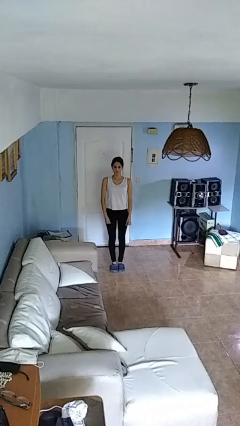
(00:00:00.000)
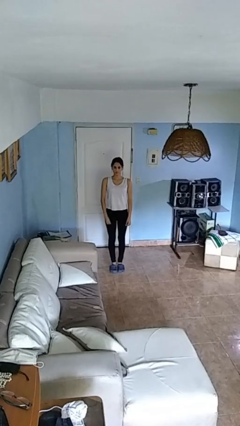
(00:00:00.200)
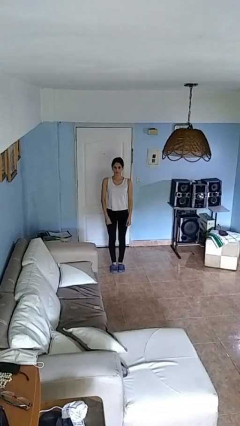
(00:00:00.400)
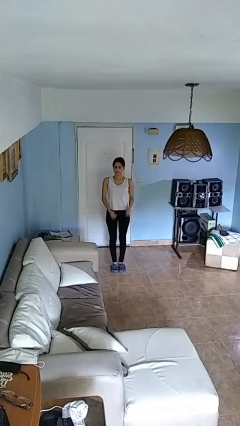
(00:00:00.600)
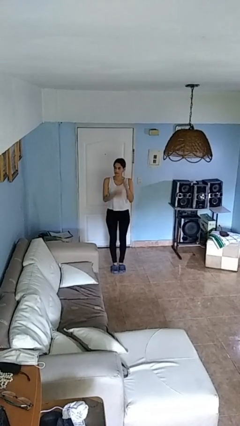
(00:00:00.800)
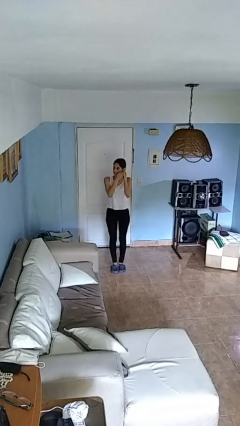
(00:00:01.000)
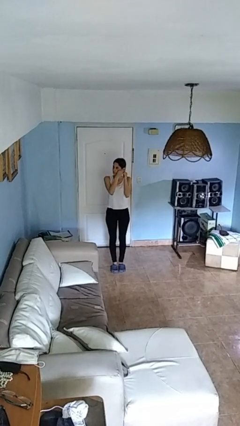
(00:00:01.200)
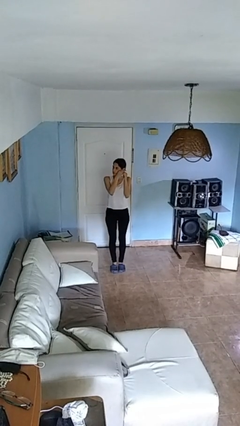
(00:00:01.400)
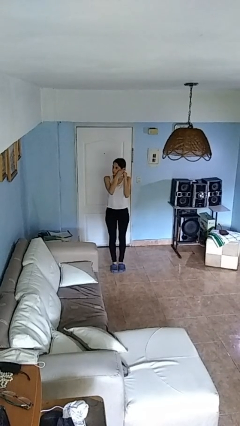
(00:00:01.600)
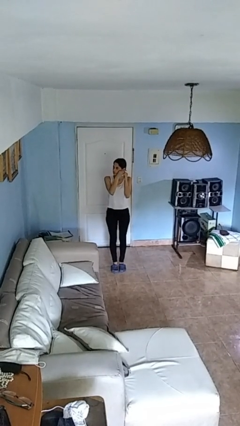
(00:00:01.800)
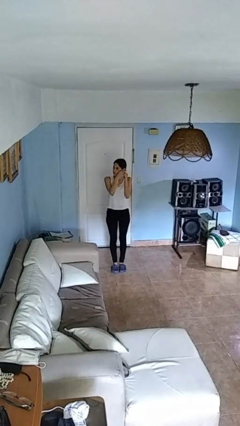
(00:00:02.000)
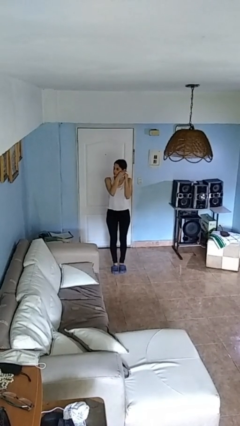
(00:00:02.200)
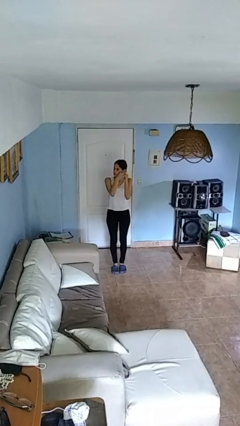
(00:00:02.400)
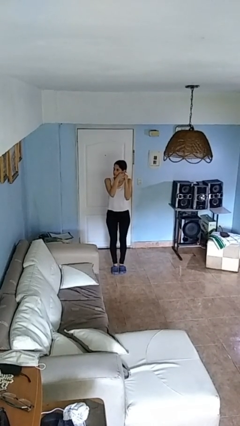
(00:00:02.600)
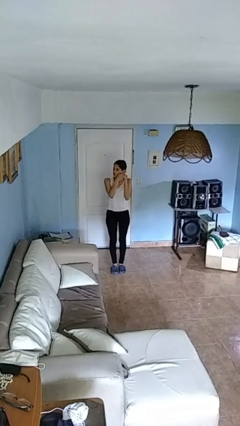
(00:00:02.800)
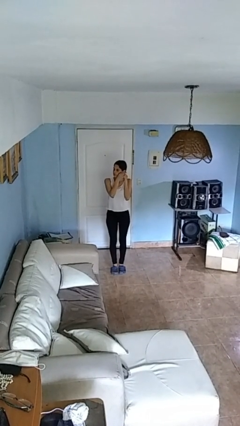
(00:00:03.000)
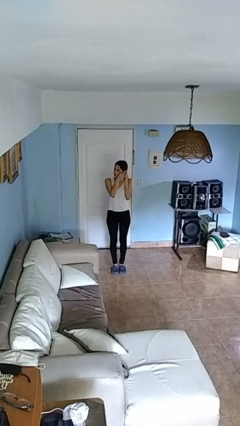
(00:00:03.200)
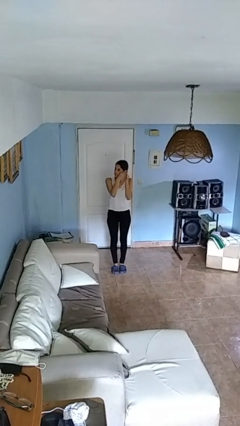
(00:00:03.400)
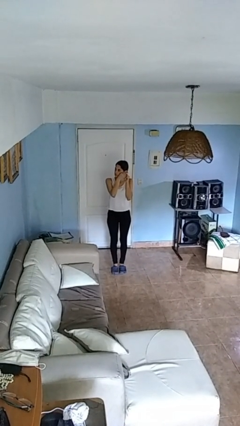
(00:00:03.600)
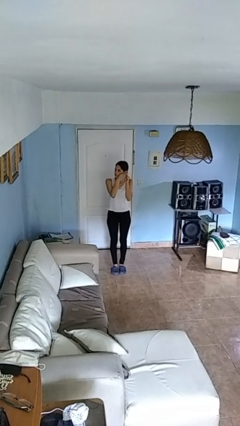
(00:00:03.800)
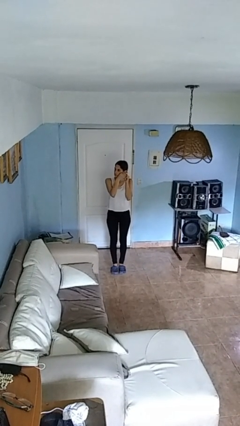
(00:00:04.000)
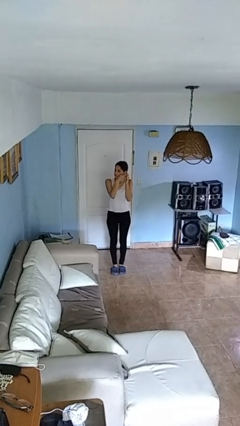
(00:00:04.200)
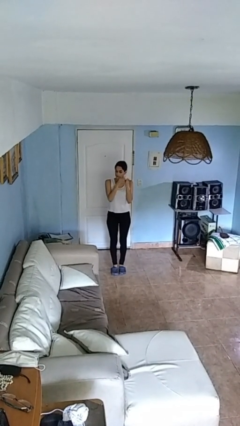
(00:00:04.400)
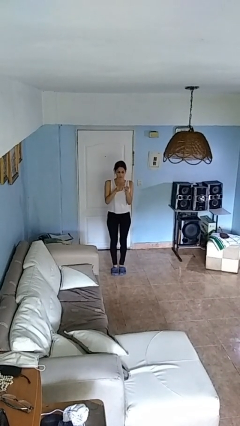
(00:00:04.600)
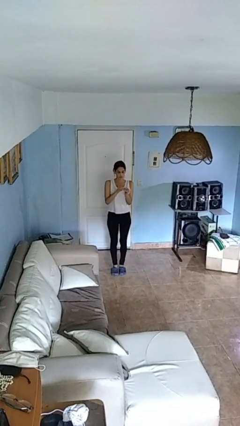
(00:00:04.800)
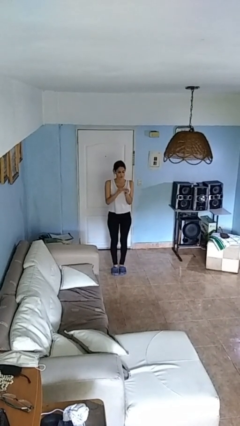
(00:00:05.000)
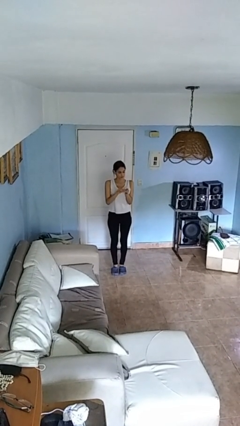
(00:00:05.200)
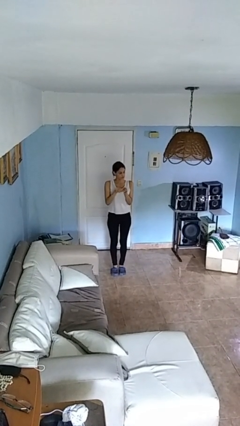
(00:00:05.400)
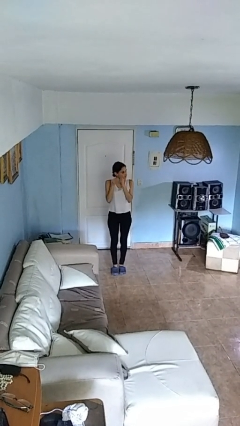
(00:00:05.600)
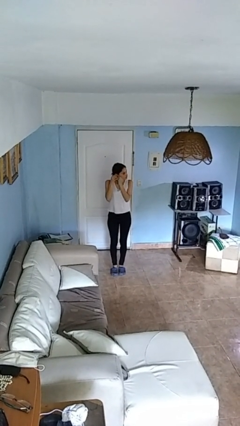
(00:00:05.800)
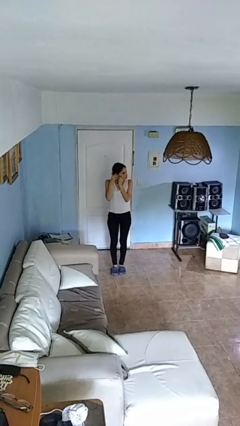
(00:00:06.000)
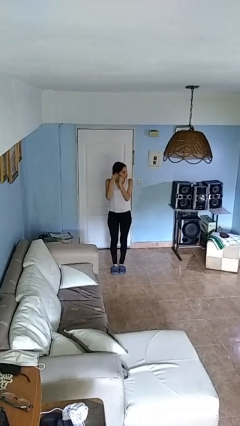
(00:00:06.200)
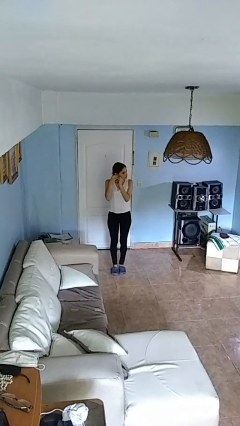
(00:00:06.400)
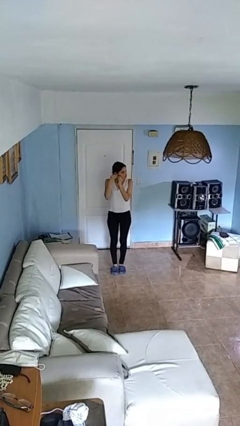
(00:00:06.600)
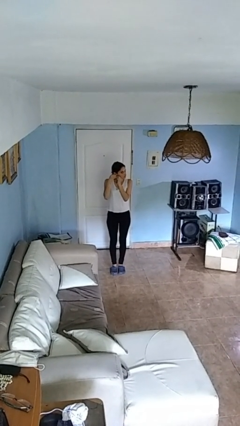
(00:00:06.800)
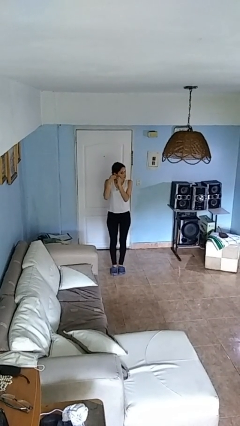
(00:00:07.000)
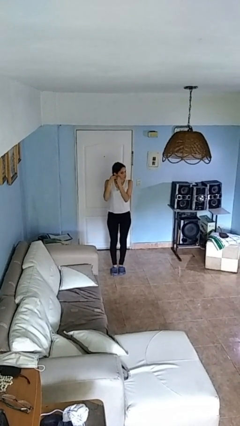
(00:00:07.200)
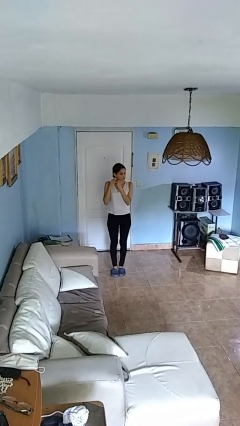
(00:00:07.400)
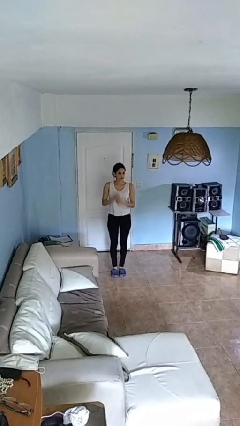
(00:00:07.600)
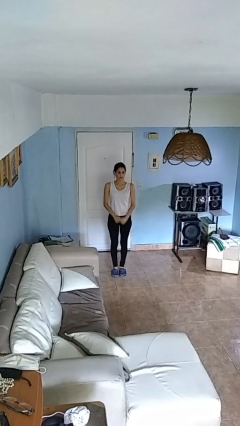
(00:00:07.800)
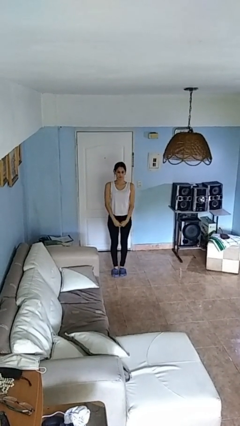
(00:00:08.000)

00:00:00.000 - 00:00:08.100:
person puts on necklace

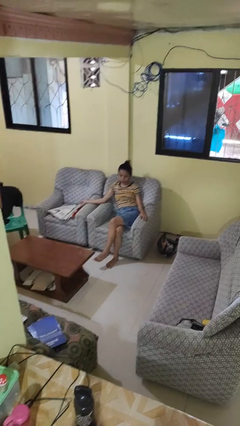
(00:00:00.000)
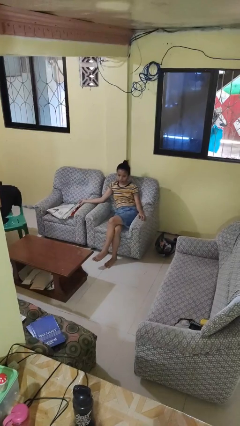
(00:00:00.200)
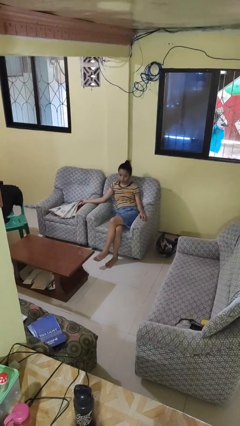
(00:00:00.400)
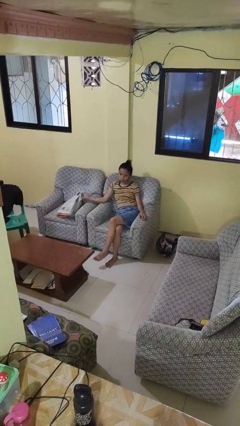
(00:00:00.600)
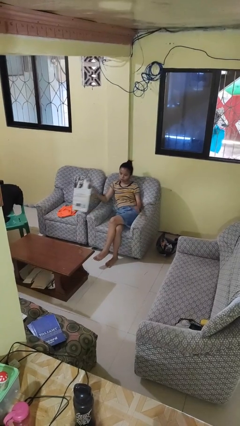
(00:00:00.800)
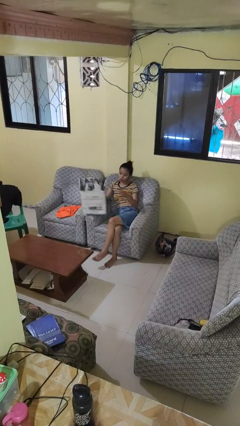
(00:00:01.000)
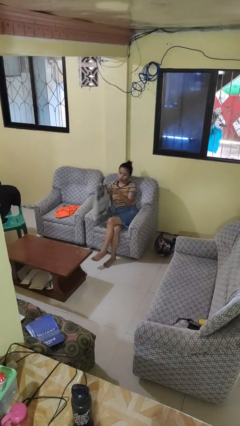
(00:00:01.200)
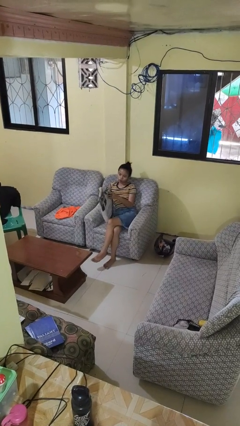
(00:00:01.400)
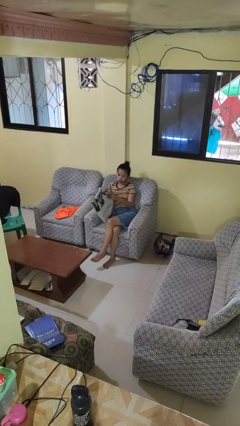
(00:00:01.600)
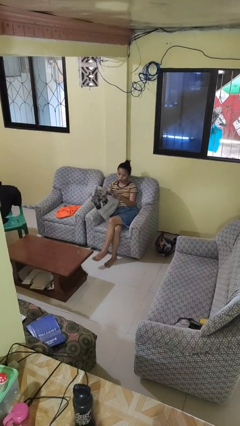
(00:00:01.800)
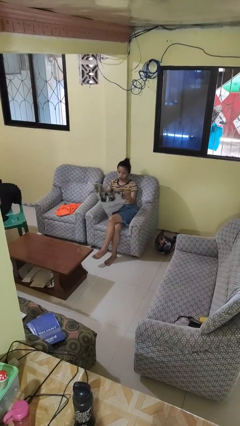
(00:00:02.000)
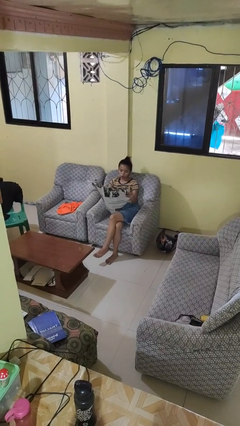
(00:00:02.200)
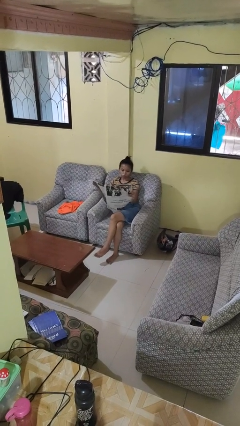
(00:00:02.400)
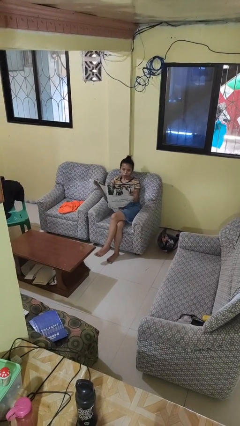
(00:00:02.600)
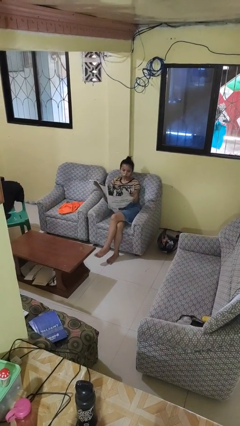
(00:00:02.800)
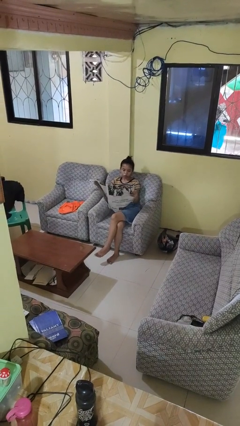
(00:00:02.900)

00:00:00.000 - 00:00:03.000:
person reads newspaper

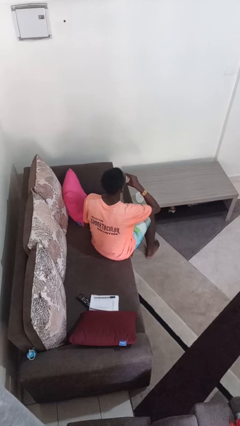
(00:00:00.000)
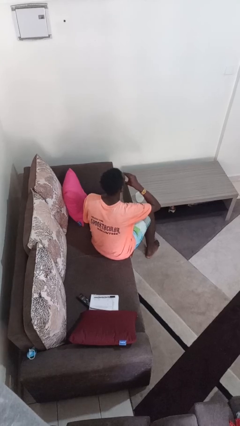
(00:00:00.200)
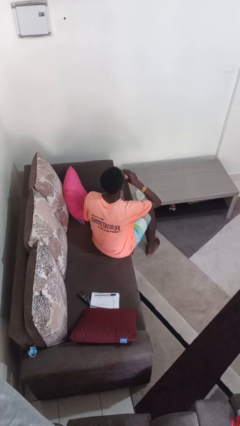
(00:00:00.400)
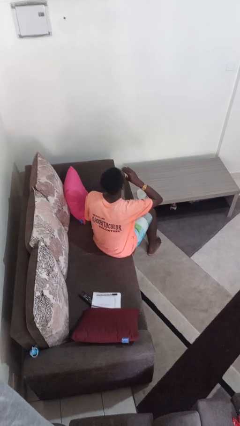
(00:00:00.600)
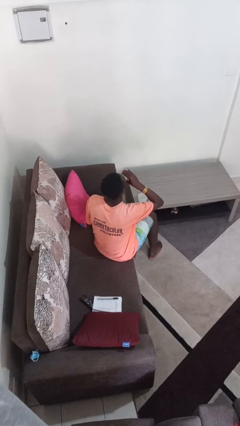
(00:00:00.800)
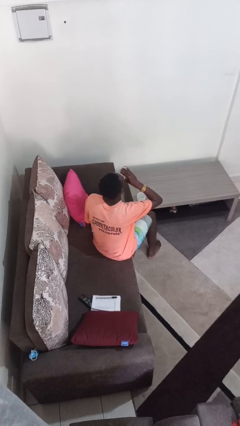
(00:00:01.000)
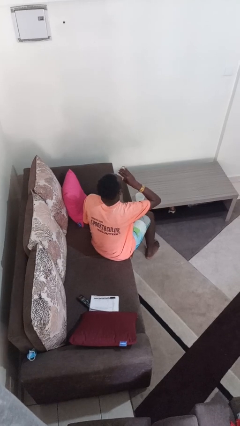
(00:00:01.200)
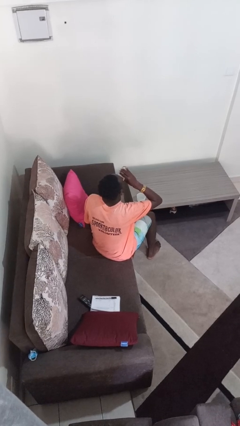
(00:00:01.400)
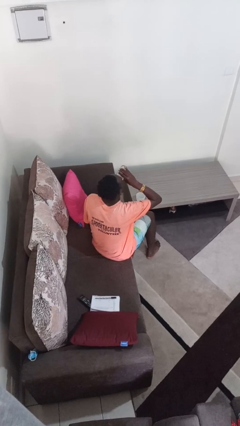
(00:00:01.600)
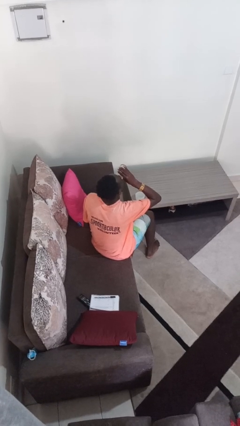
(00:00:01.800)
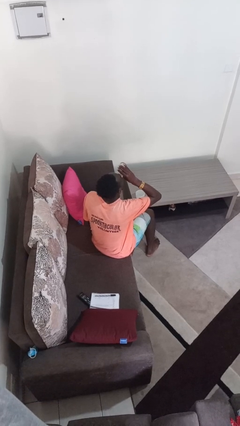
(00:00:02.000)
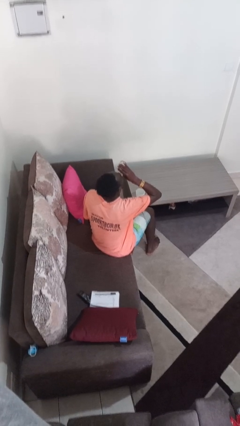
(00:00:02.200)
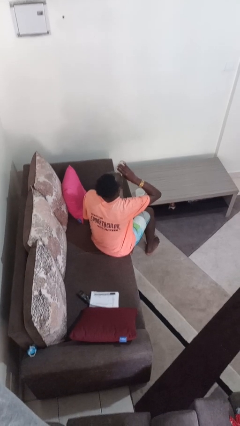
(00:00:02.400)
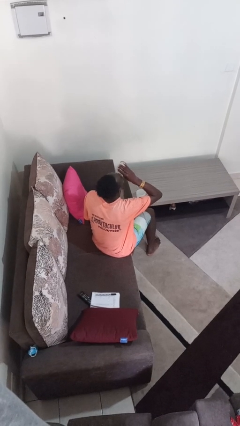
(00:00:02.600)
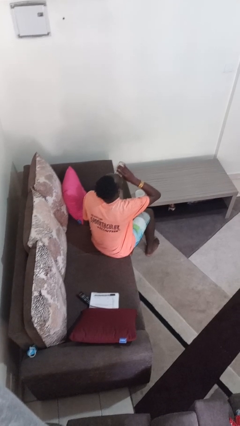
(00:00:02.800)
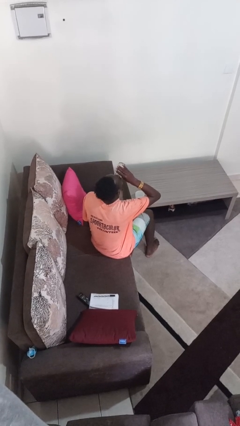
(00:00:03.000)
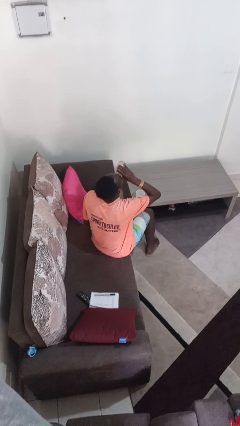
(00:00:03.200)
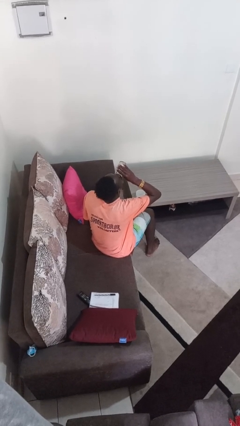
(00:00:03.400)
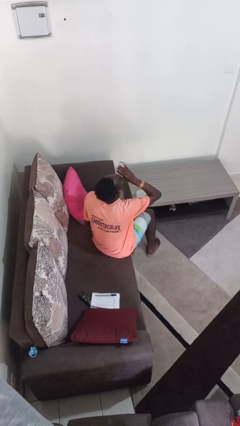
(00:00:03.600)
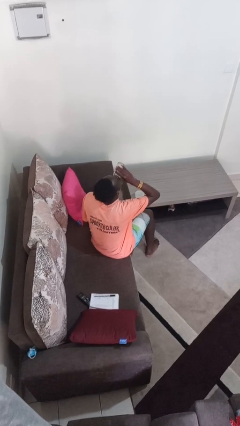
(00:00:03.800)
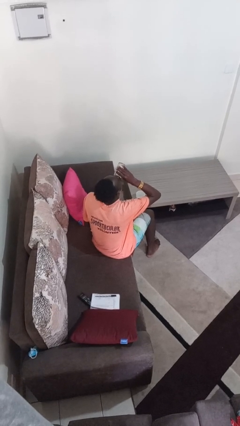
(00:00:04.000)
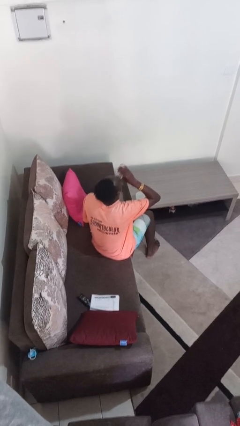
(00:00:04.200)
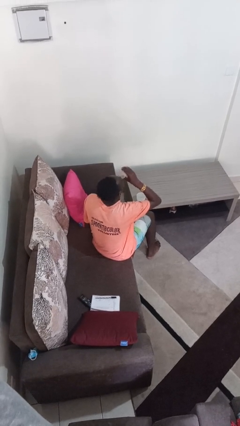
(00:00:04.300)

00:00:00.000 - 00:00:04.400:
person drinks from shotglass

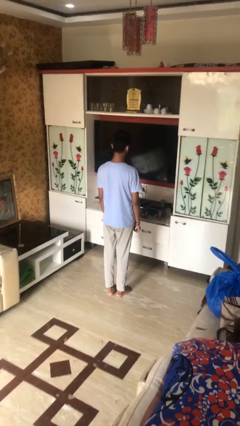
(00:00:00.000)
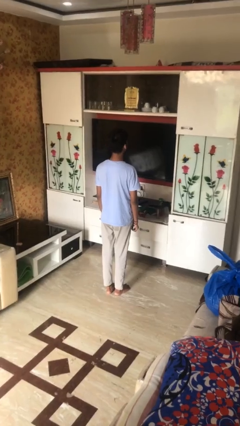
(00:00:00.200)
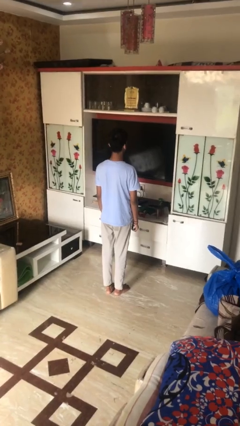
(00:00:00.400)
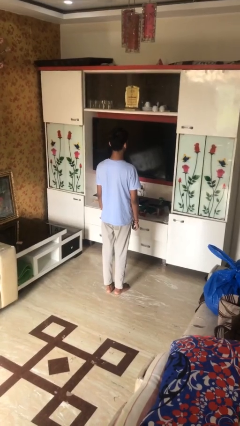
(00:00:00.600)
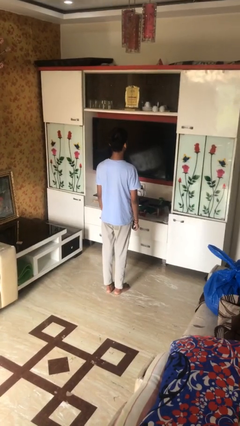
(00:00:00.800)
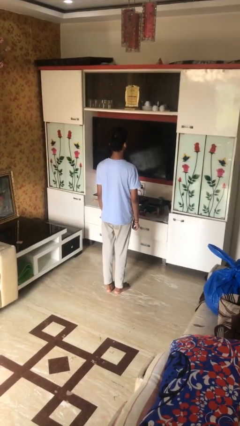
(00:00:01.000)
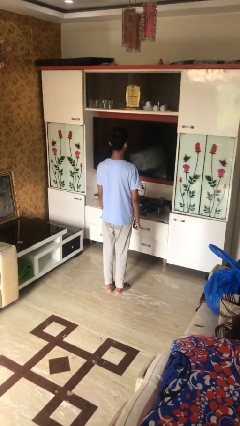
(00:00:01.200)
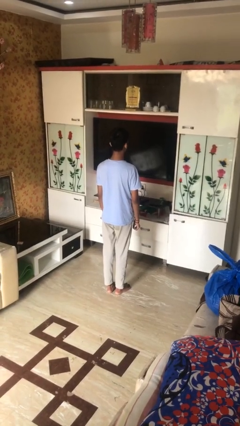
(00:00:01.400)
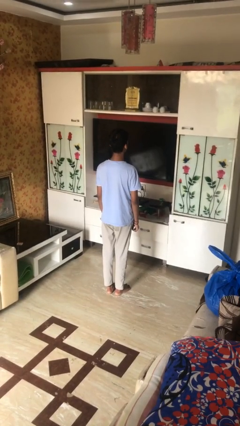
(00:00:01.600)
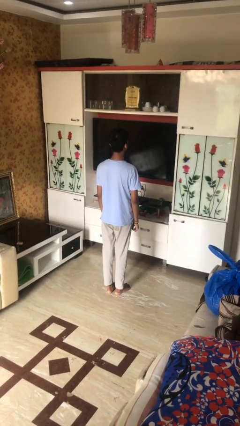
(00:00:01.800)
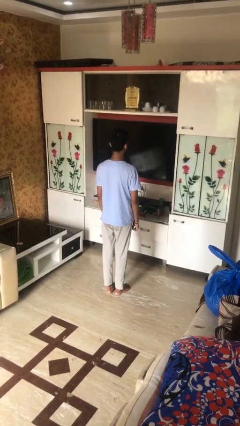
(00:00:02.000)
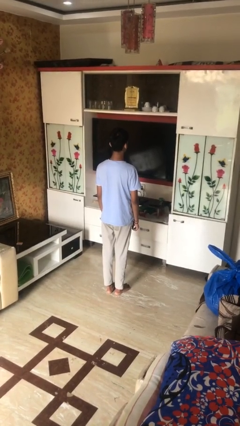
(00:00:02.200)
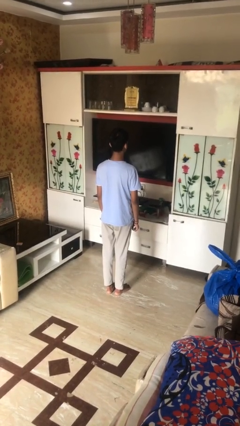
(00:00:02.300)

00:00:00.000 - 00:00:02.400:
person nods head

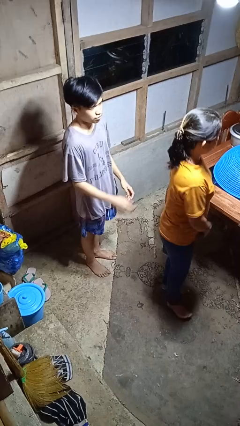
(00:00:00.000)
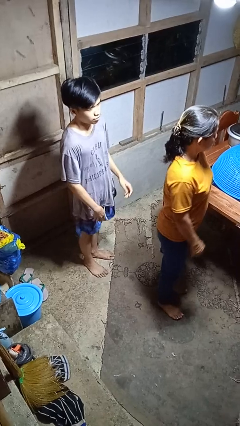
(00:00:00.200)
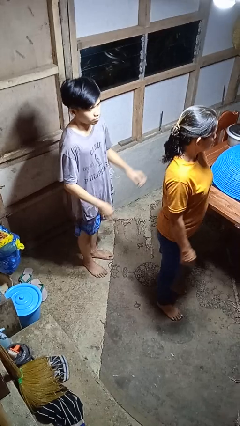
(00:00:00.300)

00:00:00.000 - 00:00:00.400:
person grabs person by shoulder
